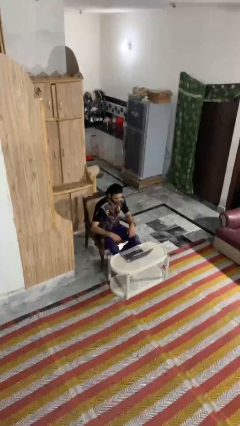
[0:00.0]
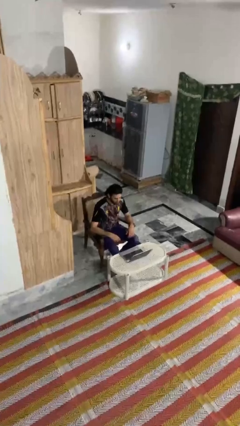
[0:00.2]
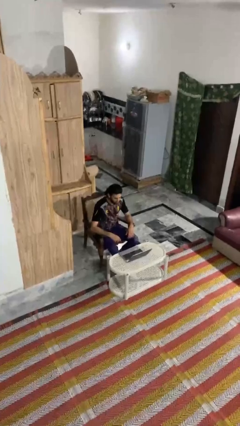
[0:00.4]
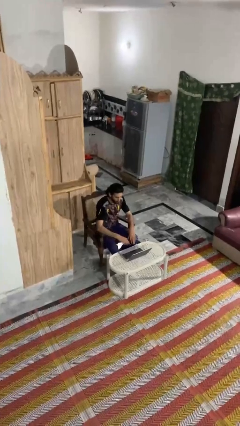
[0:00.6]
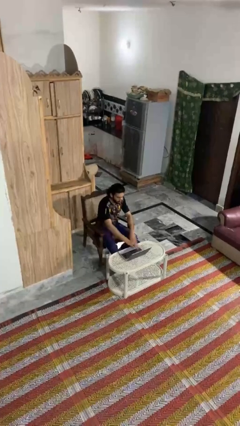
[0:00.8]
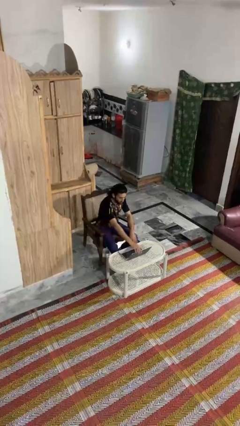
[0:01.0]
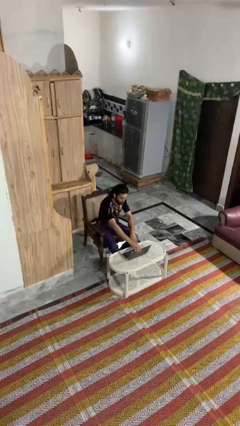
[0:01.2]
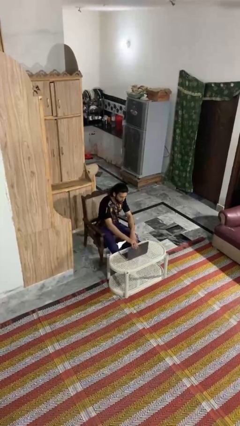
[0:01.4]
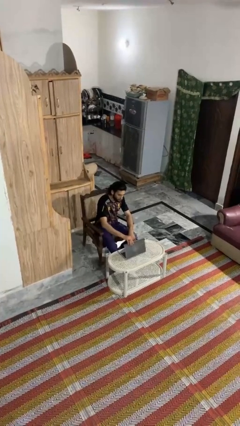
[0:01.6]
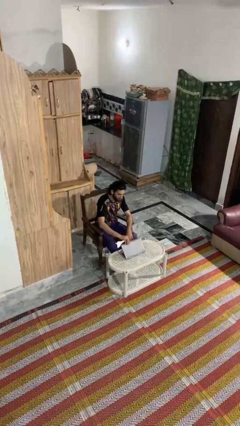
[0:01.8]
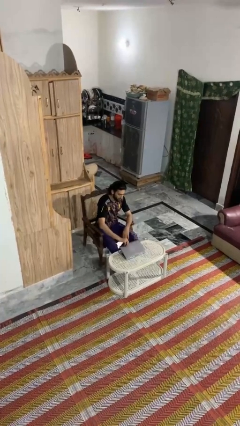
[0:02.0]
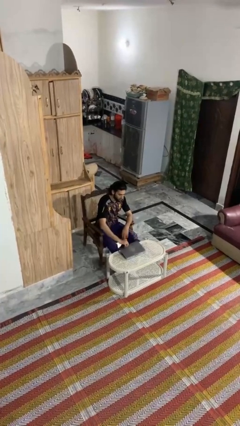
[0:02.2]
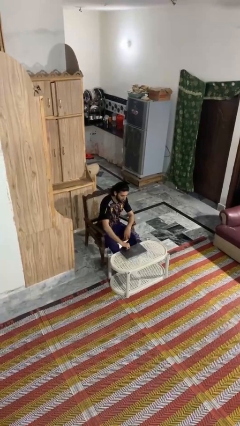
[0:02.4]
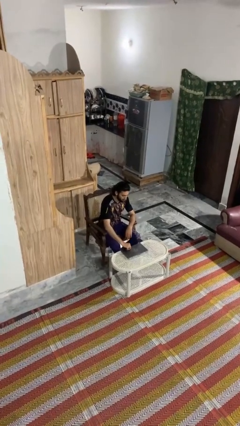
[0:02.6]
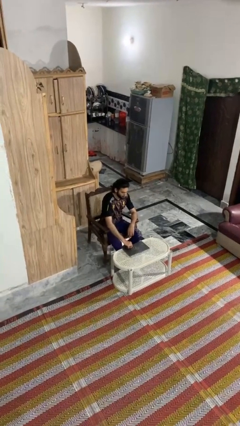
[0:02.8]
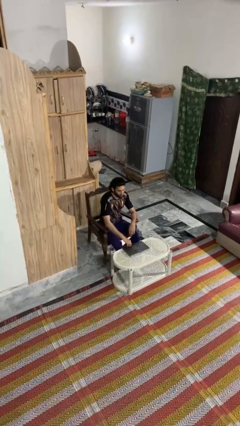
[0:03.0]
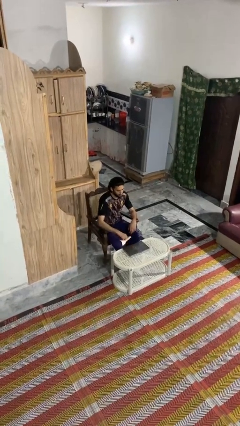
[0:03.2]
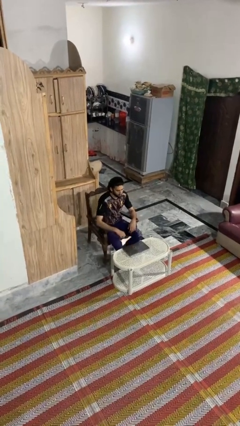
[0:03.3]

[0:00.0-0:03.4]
person closes laptop

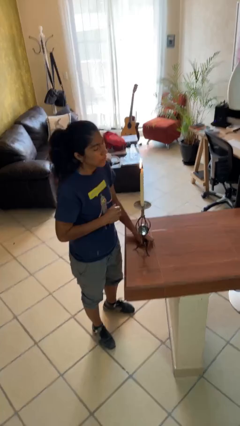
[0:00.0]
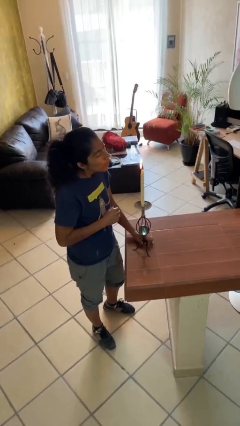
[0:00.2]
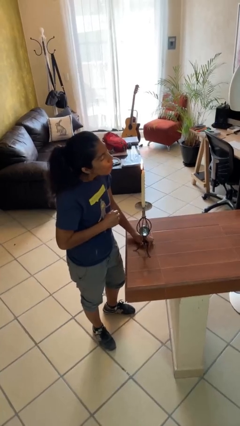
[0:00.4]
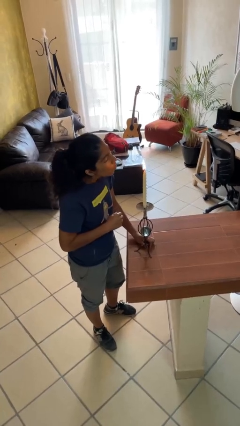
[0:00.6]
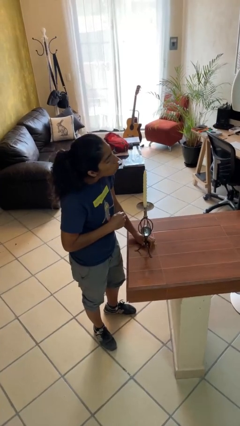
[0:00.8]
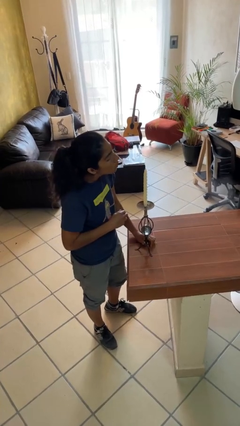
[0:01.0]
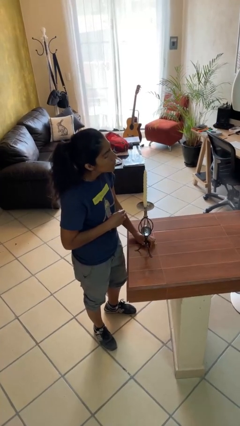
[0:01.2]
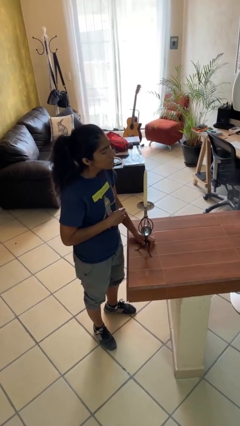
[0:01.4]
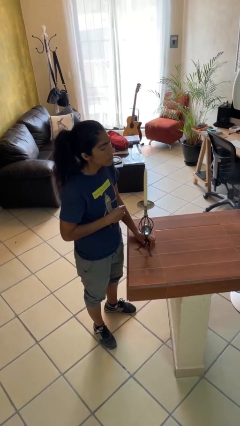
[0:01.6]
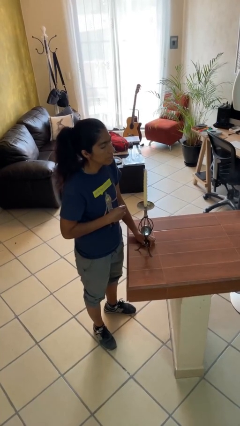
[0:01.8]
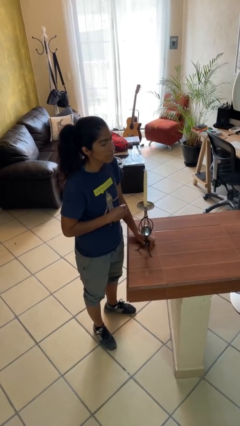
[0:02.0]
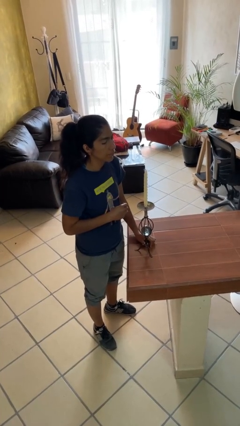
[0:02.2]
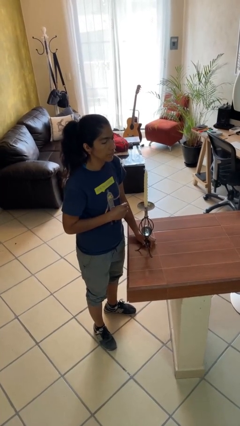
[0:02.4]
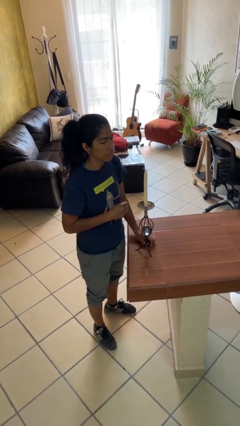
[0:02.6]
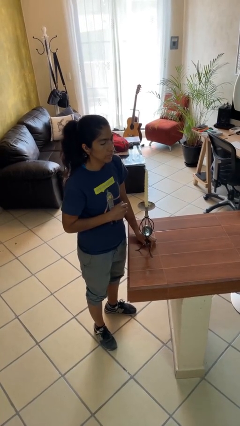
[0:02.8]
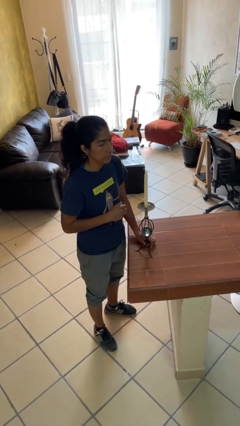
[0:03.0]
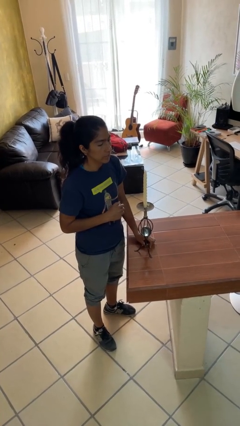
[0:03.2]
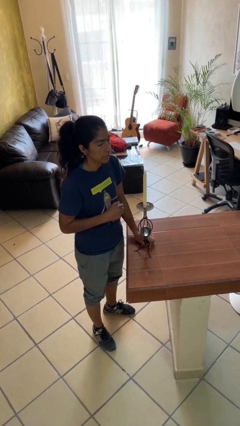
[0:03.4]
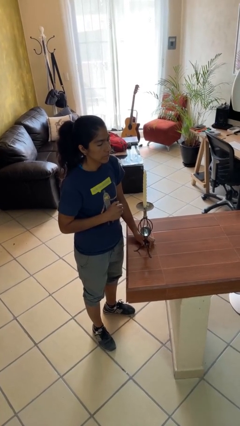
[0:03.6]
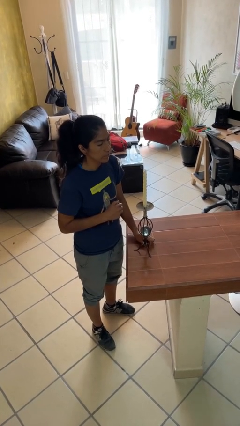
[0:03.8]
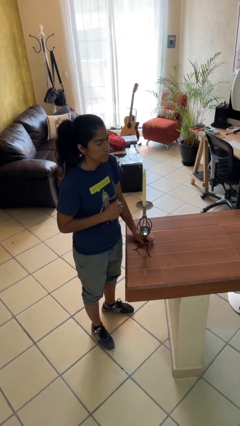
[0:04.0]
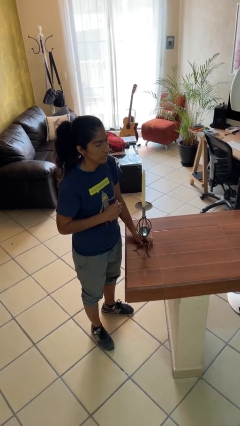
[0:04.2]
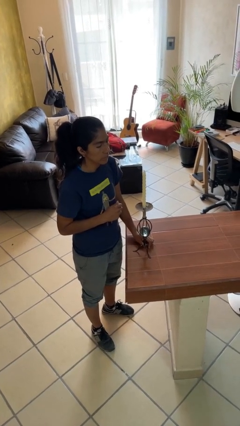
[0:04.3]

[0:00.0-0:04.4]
person extinguishes candle

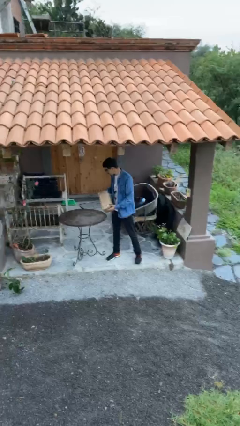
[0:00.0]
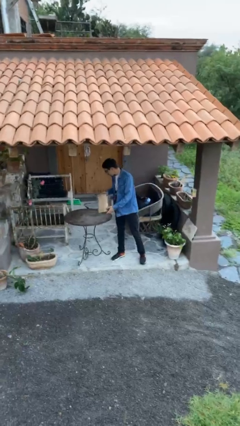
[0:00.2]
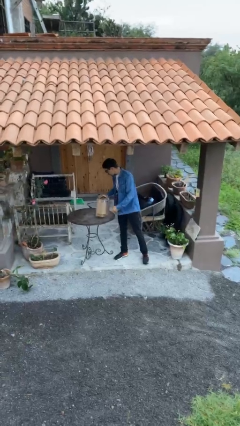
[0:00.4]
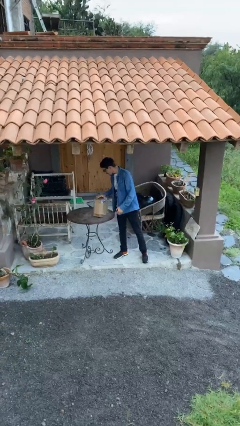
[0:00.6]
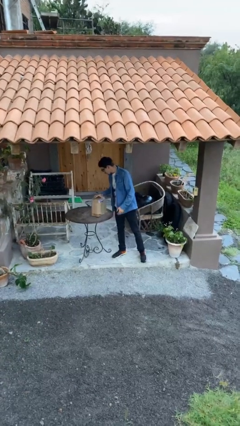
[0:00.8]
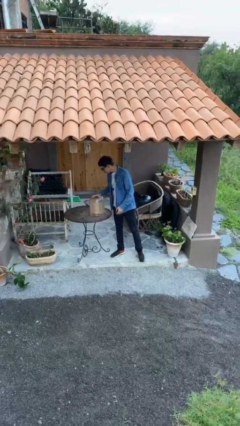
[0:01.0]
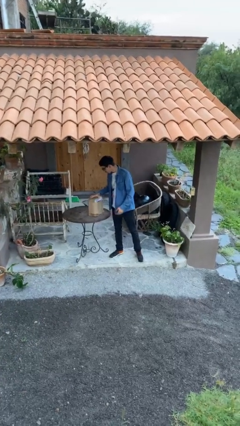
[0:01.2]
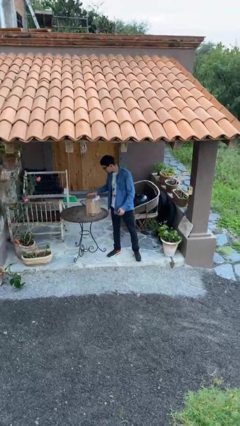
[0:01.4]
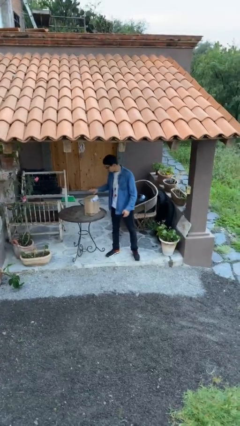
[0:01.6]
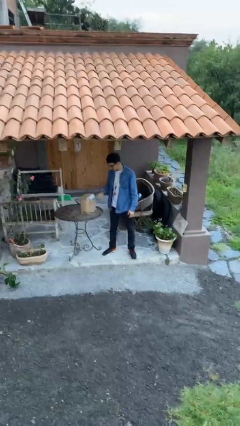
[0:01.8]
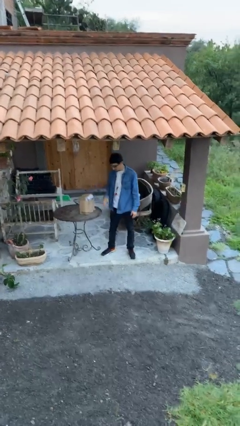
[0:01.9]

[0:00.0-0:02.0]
person puts down object on table

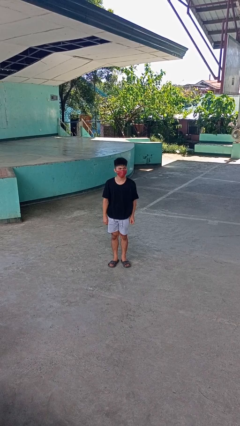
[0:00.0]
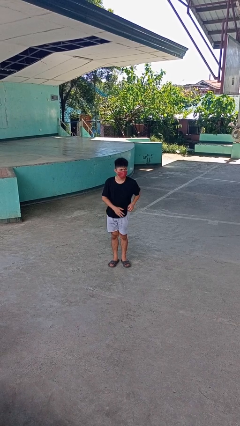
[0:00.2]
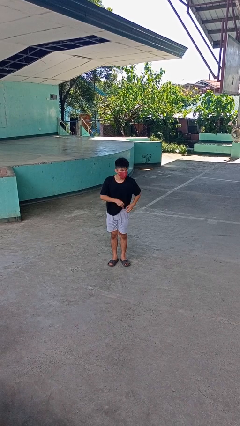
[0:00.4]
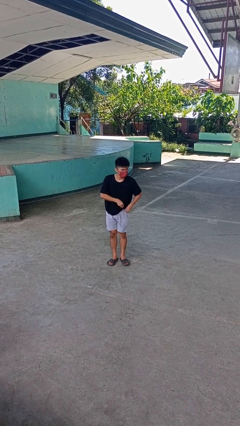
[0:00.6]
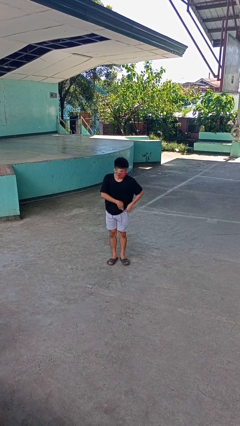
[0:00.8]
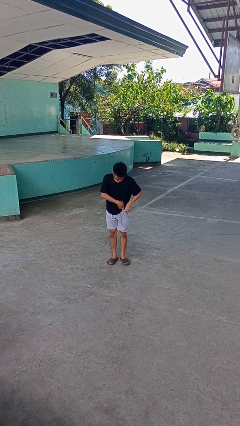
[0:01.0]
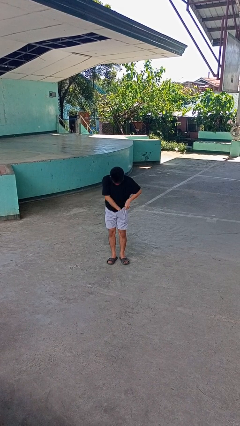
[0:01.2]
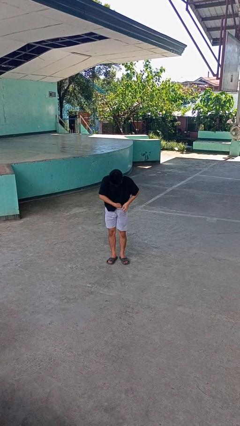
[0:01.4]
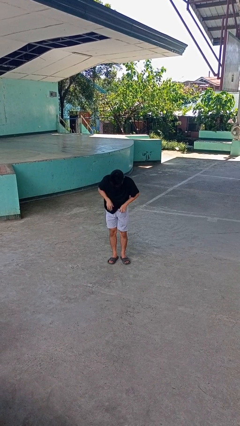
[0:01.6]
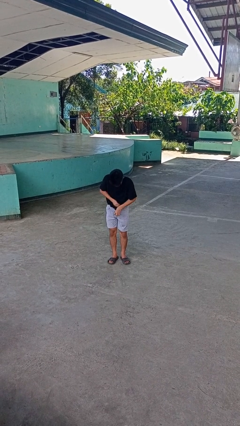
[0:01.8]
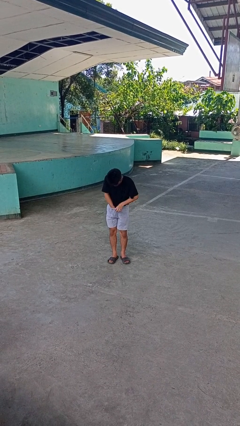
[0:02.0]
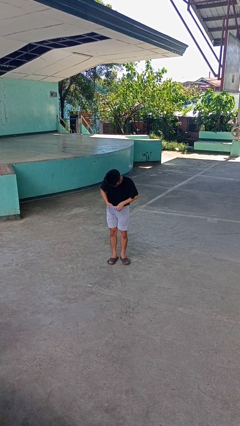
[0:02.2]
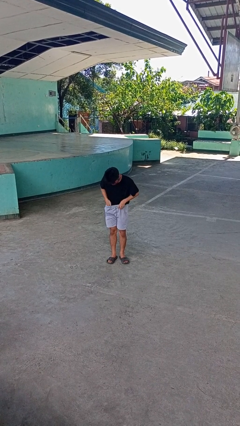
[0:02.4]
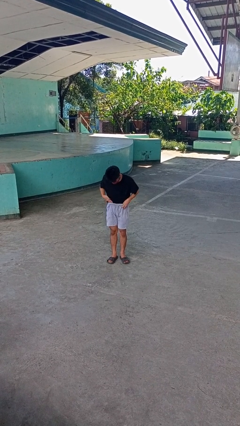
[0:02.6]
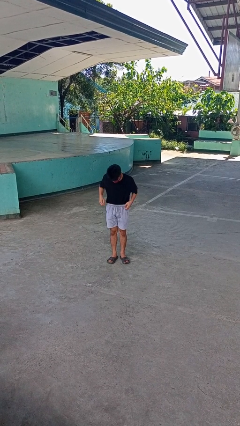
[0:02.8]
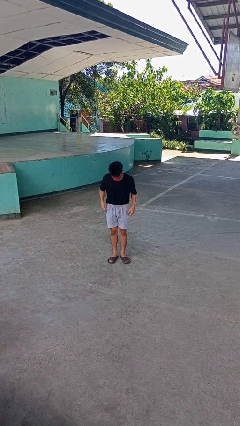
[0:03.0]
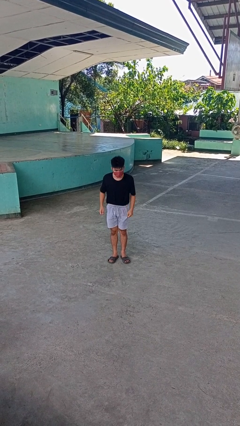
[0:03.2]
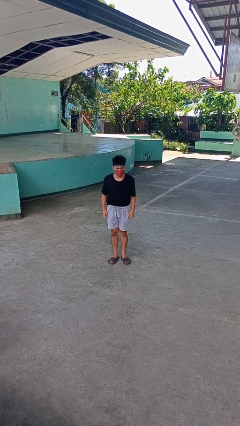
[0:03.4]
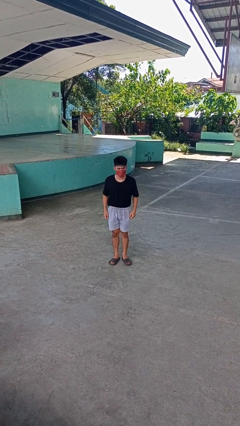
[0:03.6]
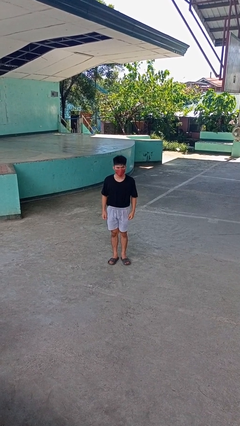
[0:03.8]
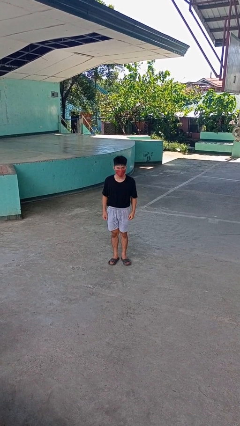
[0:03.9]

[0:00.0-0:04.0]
person tucks in shirt

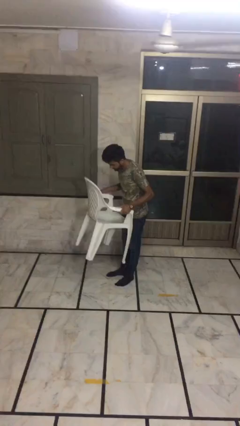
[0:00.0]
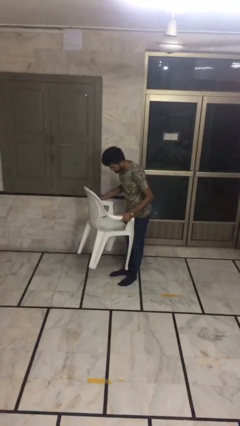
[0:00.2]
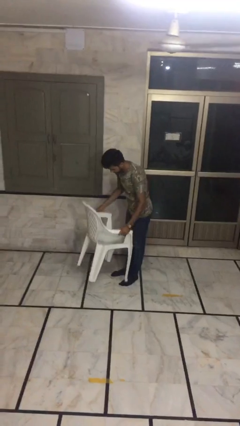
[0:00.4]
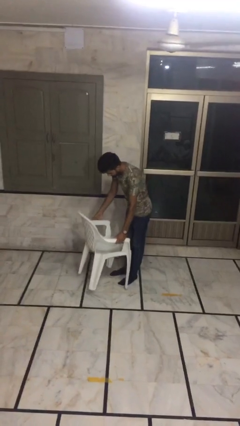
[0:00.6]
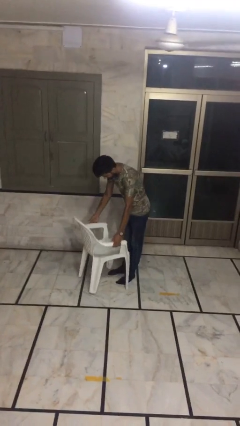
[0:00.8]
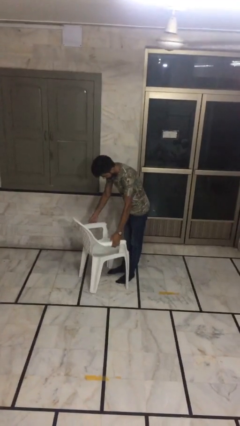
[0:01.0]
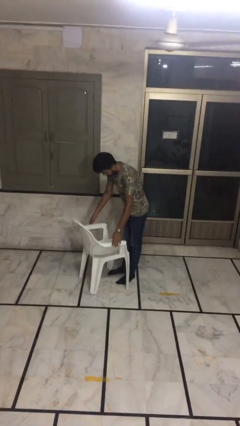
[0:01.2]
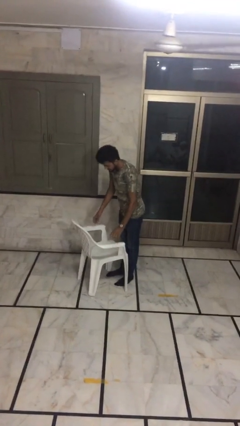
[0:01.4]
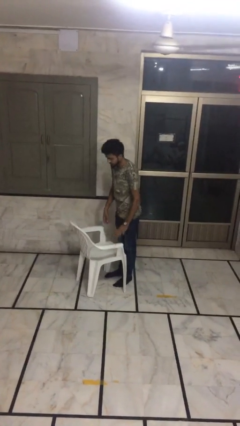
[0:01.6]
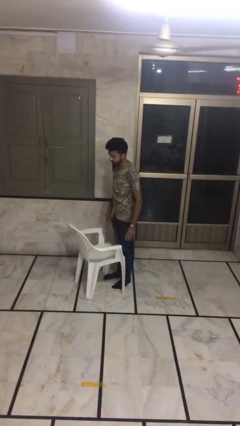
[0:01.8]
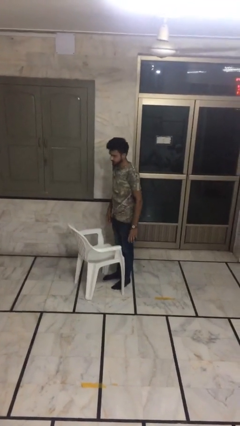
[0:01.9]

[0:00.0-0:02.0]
person puts down object on floor

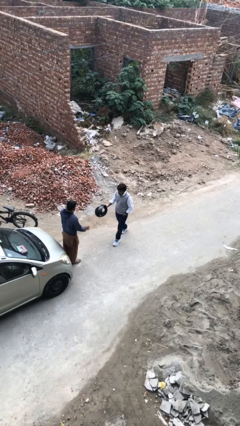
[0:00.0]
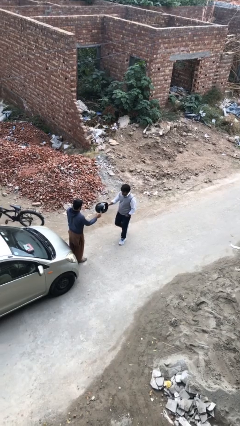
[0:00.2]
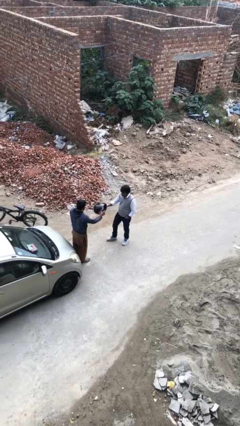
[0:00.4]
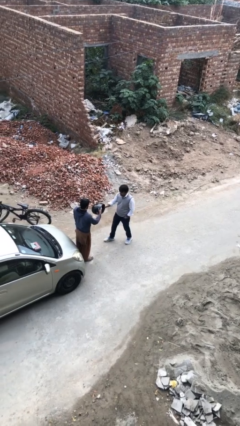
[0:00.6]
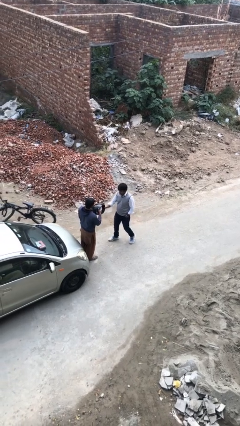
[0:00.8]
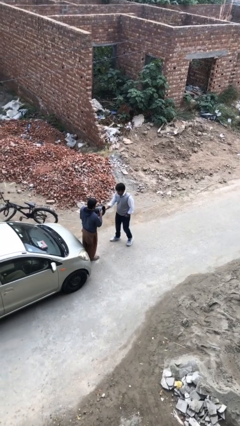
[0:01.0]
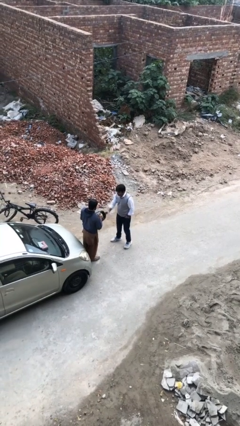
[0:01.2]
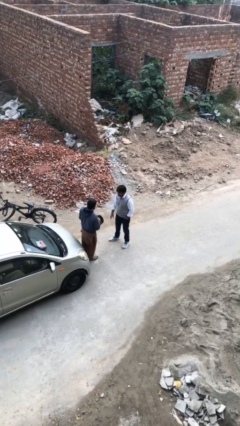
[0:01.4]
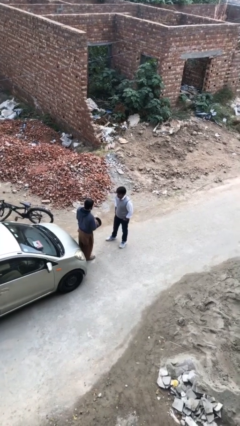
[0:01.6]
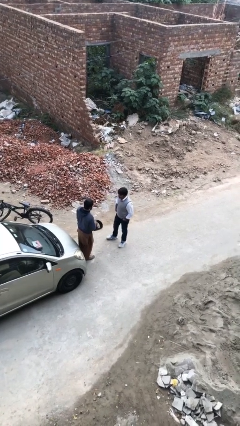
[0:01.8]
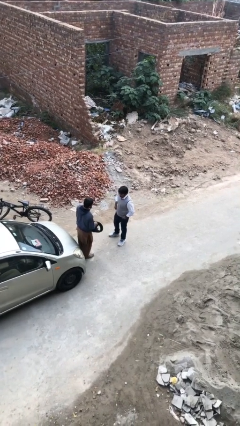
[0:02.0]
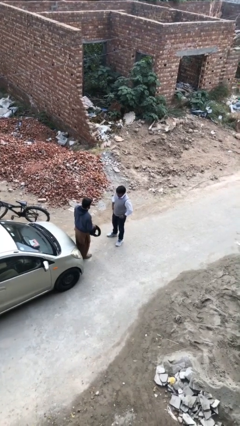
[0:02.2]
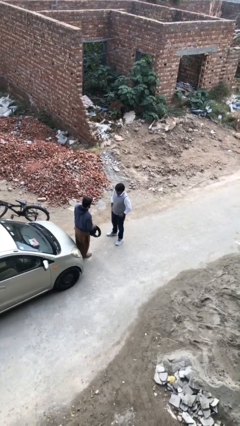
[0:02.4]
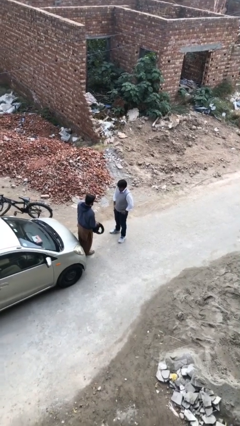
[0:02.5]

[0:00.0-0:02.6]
person transfers object to person
